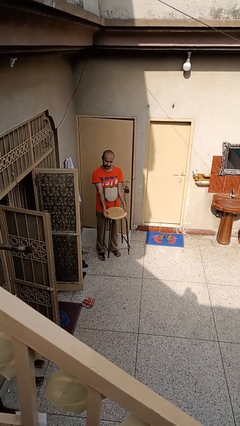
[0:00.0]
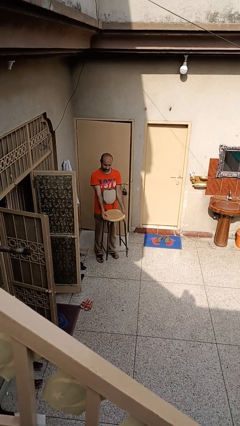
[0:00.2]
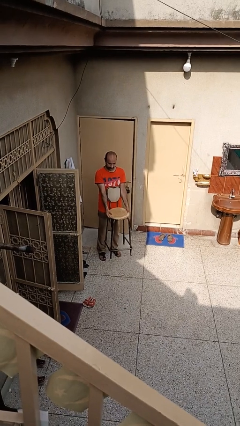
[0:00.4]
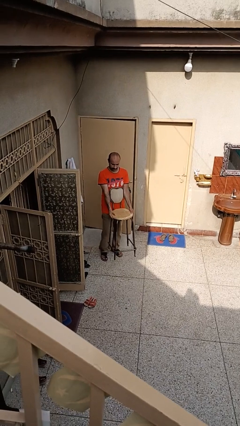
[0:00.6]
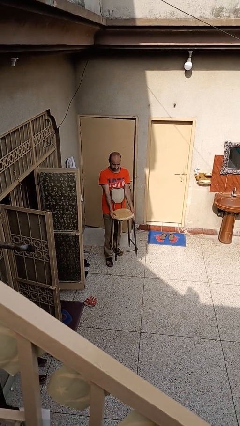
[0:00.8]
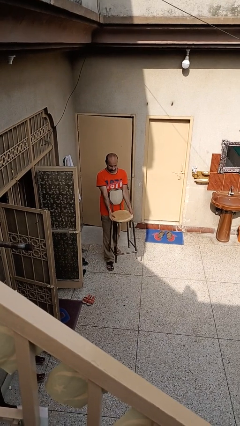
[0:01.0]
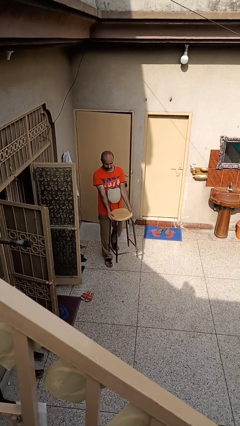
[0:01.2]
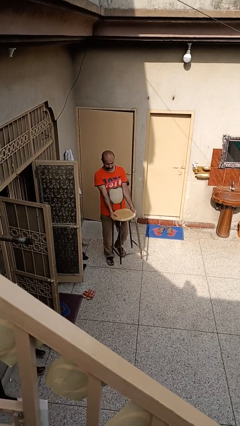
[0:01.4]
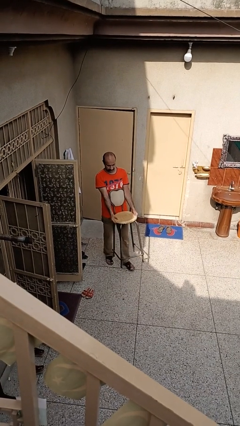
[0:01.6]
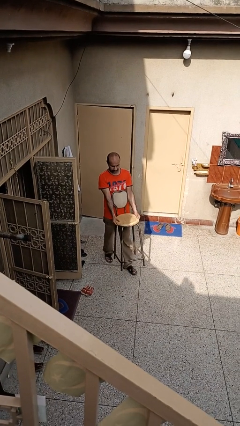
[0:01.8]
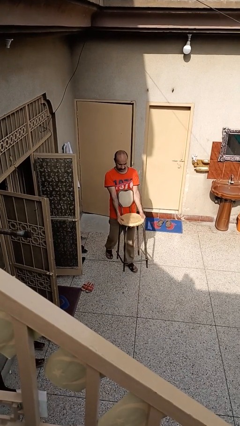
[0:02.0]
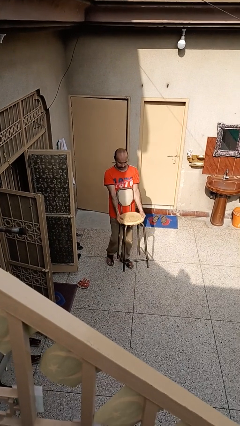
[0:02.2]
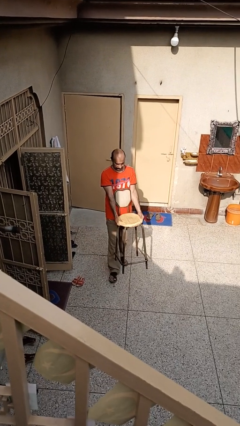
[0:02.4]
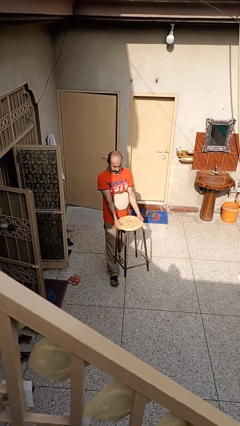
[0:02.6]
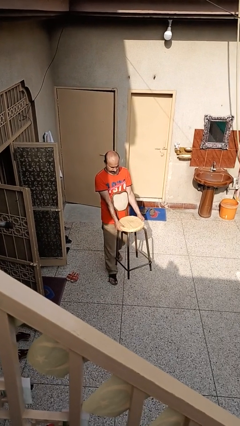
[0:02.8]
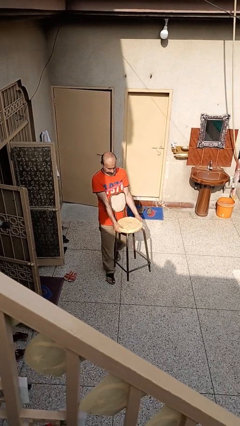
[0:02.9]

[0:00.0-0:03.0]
person carries furniture

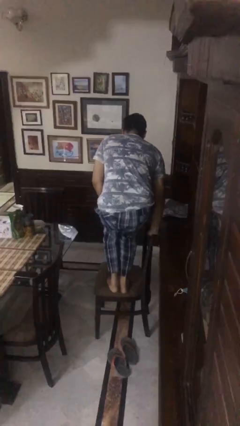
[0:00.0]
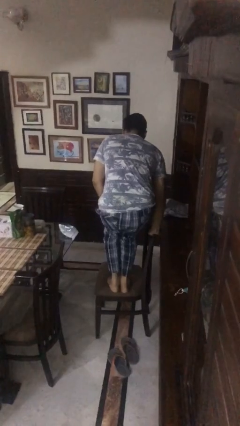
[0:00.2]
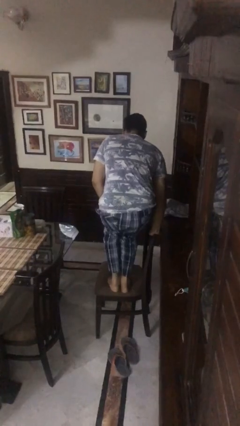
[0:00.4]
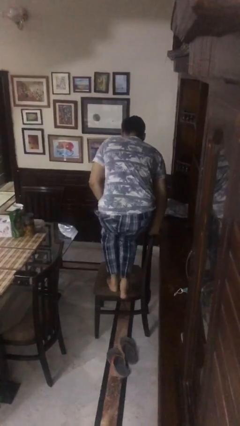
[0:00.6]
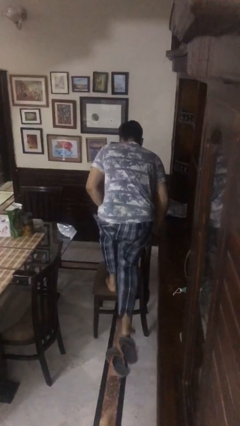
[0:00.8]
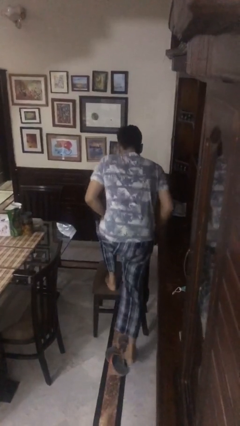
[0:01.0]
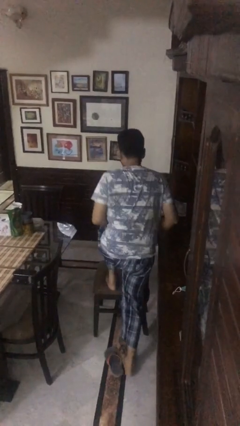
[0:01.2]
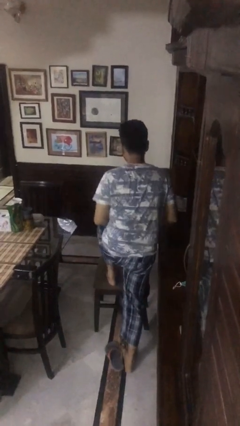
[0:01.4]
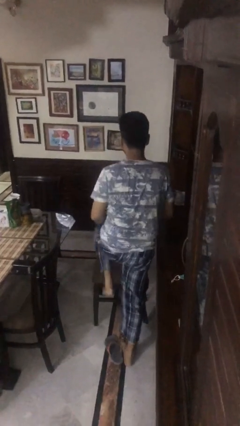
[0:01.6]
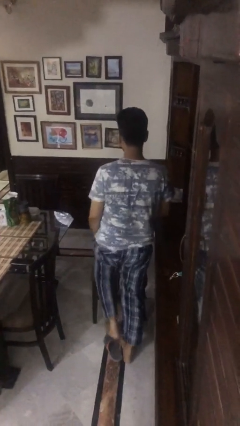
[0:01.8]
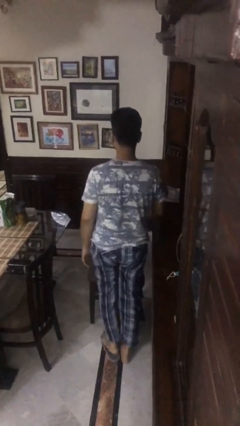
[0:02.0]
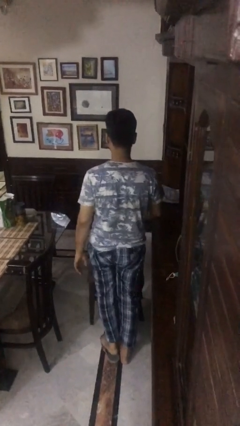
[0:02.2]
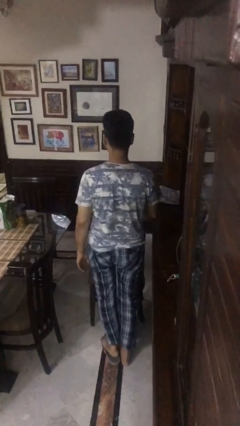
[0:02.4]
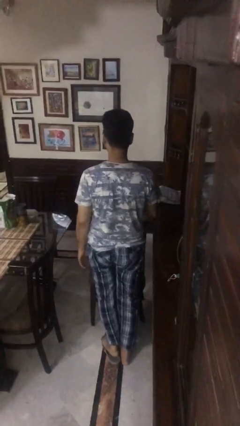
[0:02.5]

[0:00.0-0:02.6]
person climbs off chair

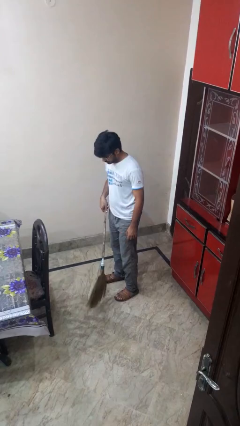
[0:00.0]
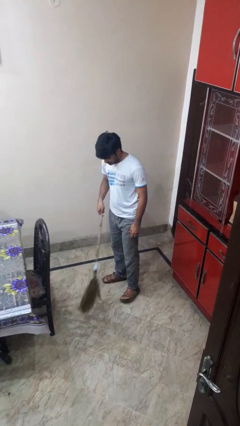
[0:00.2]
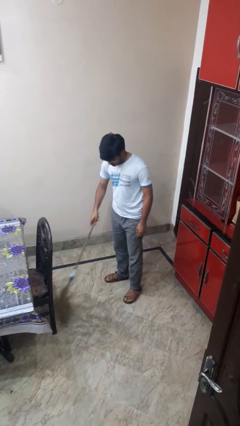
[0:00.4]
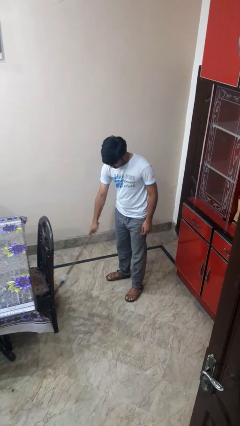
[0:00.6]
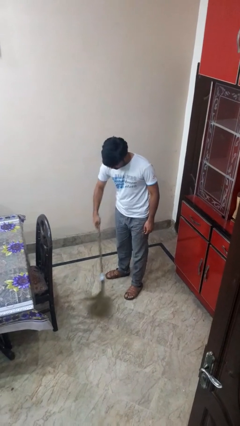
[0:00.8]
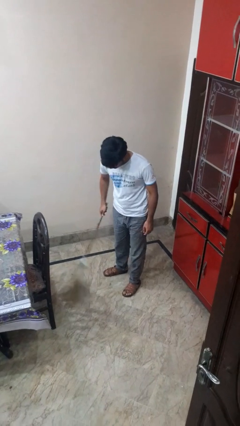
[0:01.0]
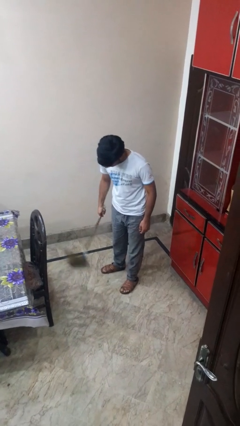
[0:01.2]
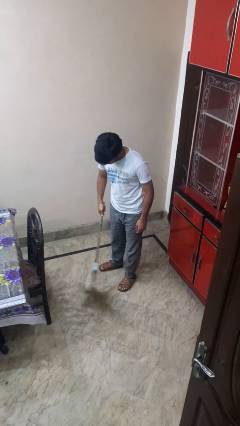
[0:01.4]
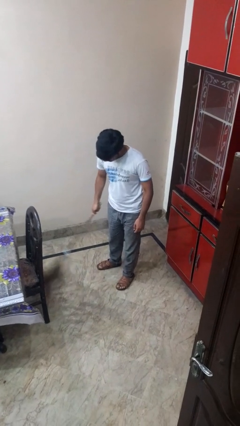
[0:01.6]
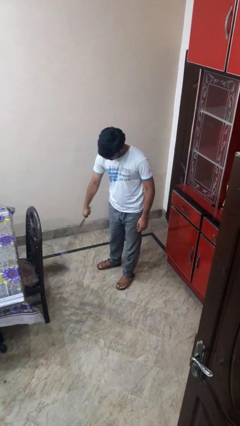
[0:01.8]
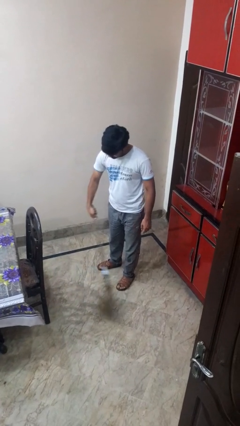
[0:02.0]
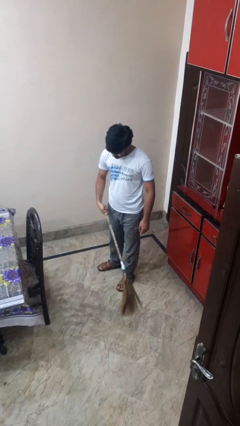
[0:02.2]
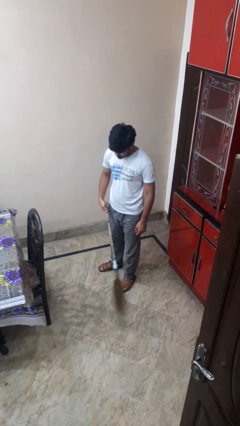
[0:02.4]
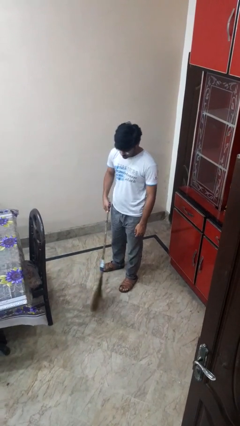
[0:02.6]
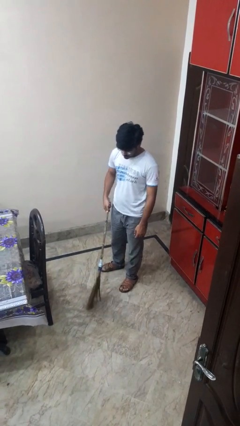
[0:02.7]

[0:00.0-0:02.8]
person sweeps floor

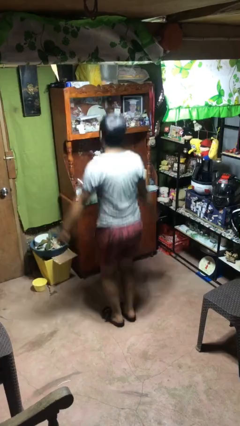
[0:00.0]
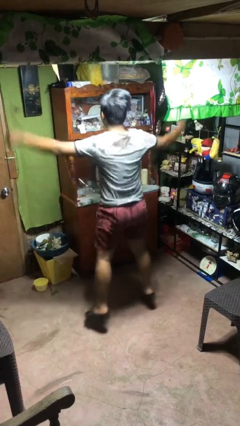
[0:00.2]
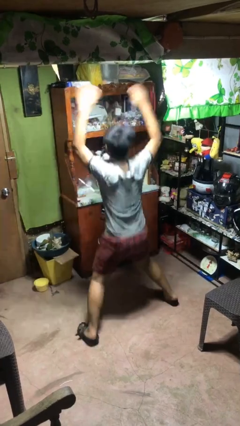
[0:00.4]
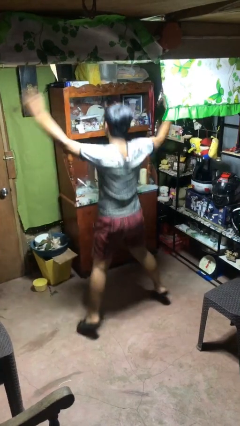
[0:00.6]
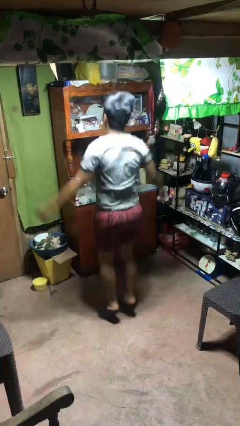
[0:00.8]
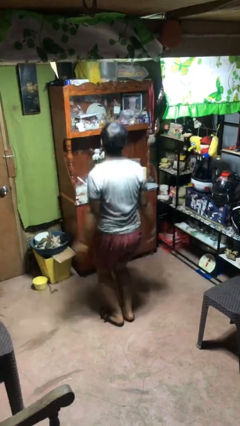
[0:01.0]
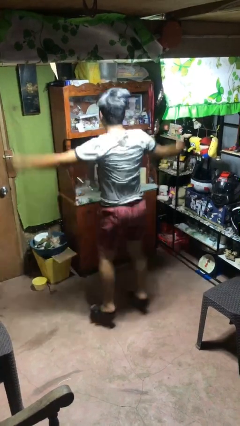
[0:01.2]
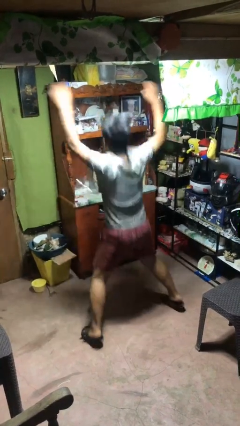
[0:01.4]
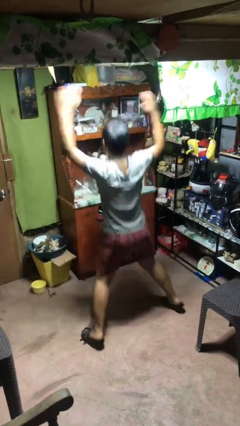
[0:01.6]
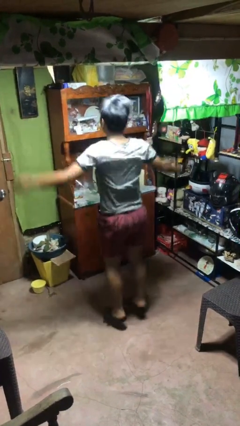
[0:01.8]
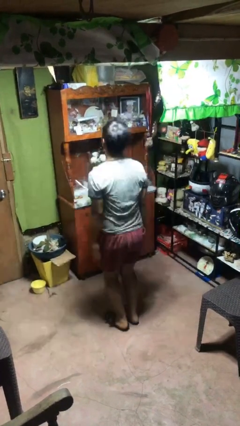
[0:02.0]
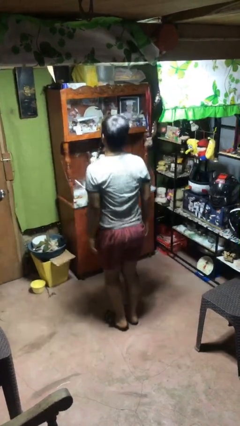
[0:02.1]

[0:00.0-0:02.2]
person exercises with jumping jacks

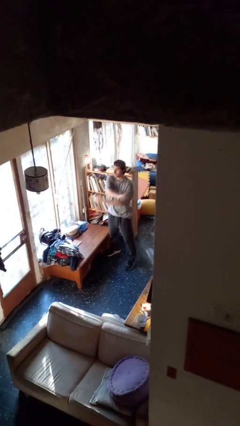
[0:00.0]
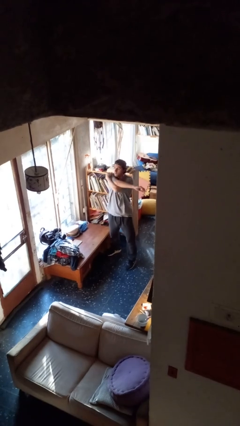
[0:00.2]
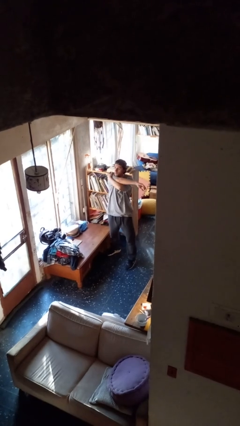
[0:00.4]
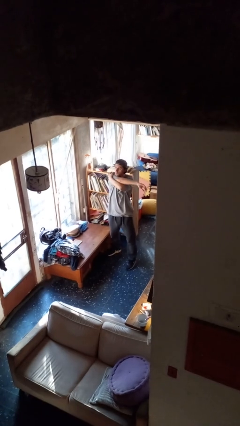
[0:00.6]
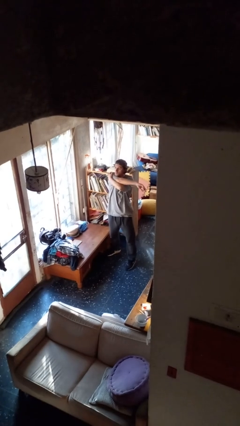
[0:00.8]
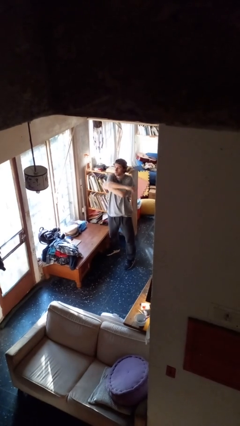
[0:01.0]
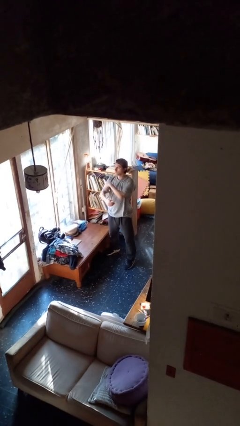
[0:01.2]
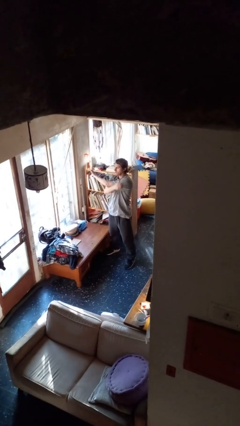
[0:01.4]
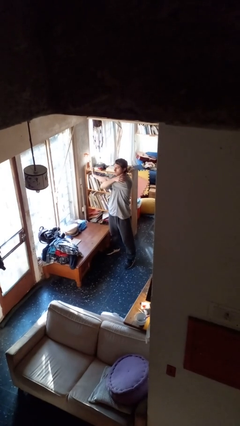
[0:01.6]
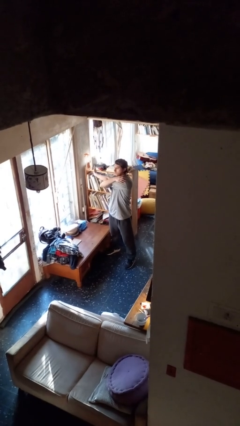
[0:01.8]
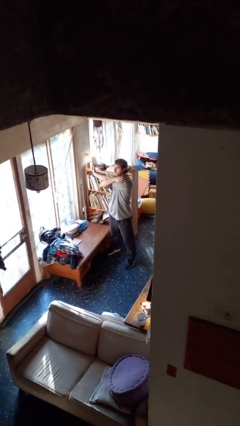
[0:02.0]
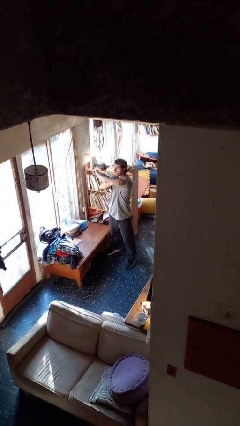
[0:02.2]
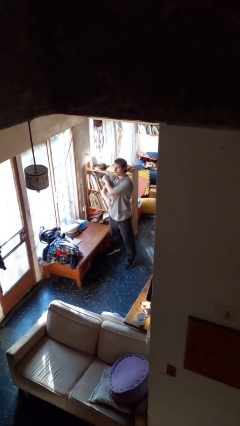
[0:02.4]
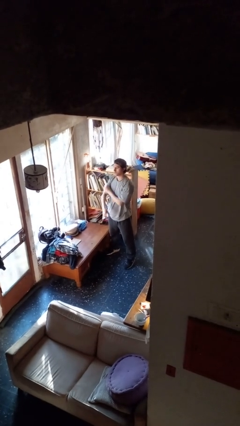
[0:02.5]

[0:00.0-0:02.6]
person stretches arms to side

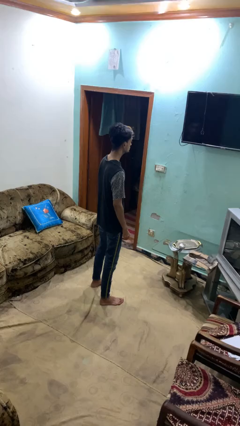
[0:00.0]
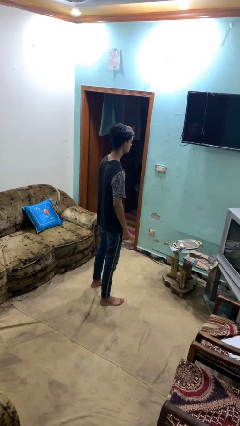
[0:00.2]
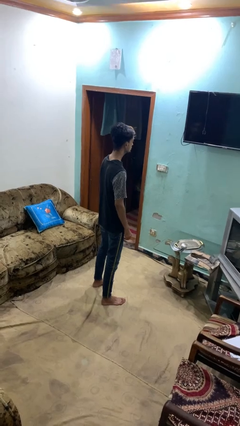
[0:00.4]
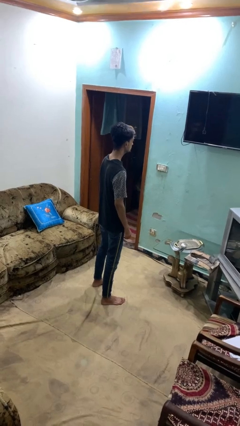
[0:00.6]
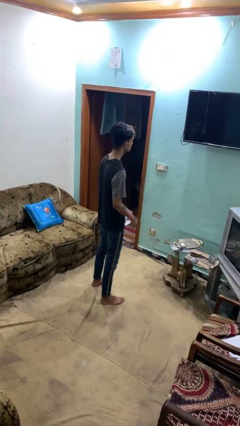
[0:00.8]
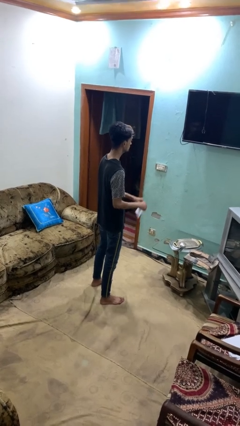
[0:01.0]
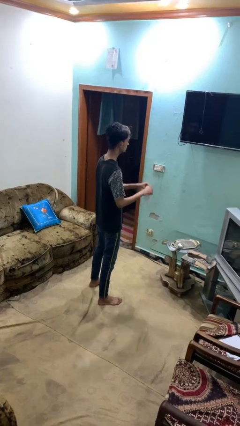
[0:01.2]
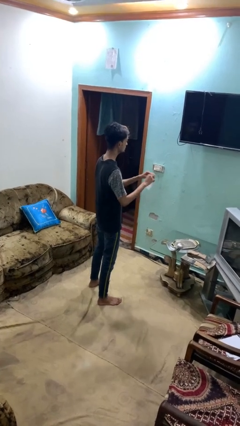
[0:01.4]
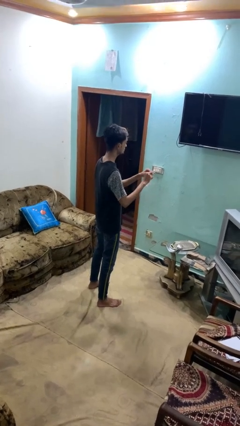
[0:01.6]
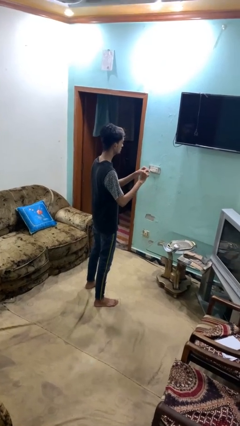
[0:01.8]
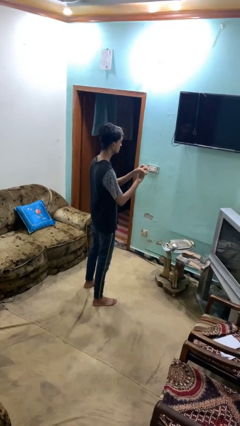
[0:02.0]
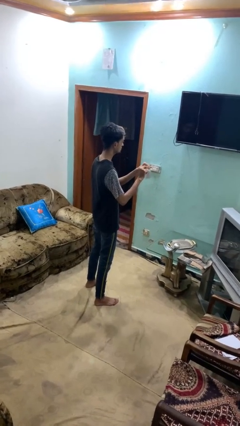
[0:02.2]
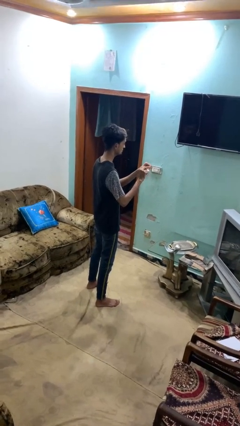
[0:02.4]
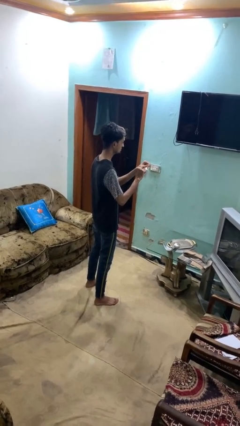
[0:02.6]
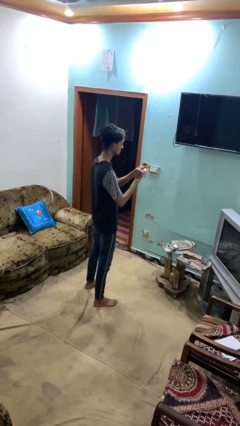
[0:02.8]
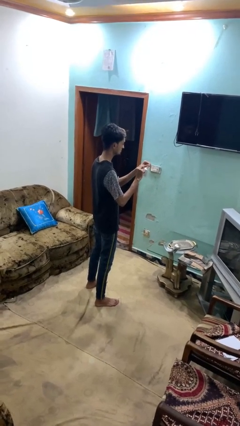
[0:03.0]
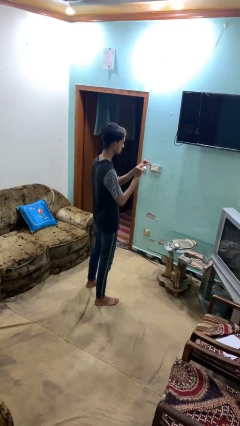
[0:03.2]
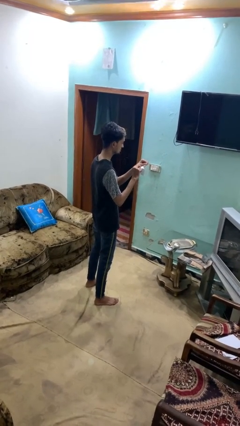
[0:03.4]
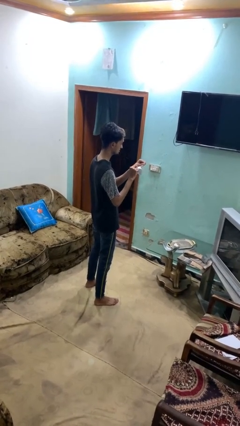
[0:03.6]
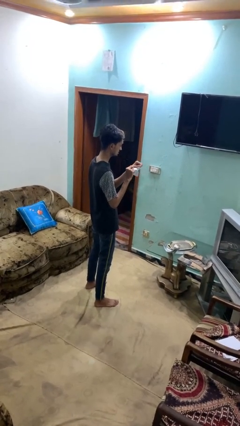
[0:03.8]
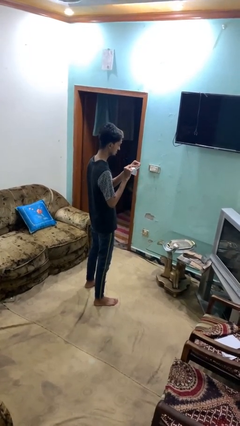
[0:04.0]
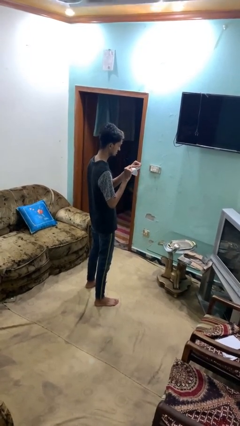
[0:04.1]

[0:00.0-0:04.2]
person tears paper
